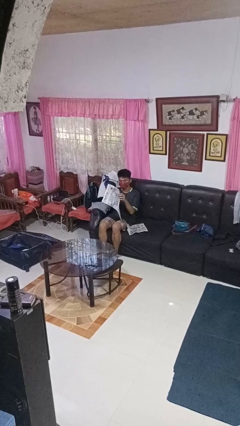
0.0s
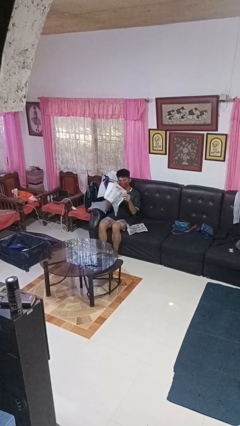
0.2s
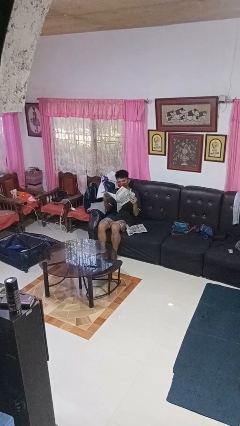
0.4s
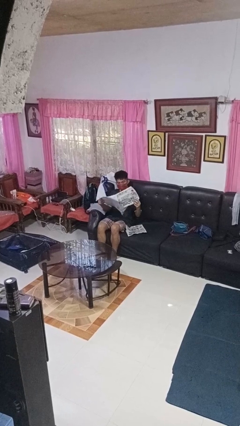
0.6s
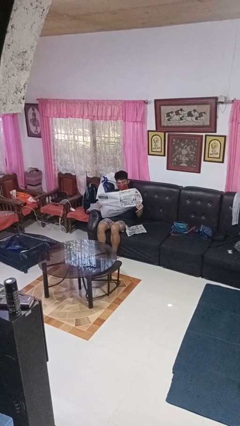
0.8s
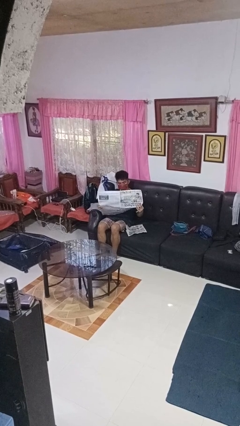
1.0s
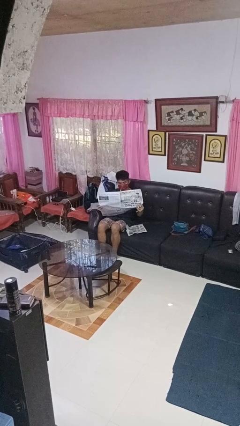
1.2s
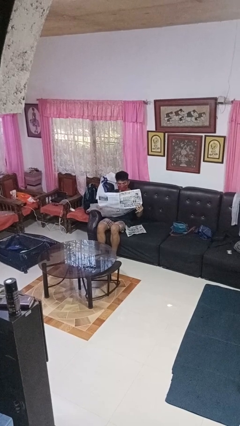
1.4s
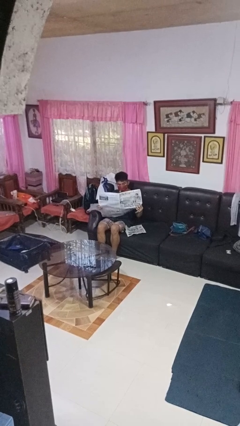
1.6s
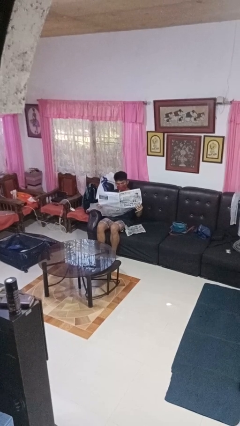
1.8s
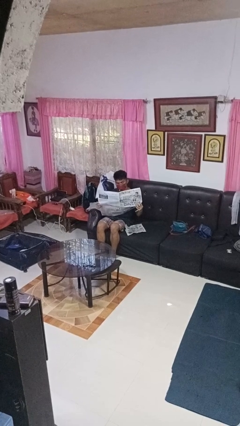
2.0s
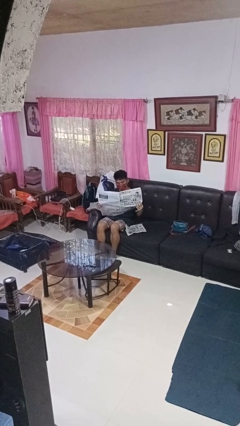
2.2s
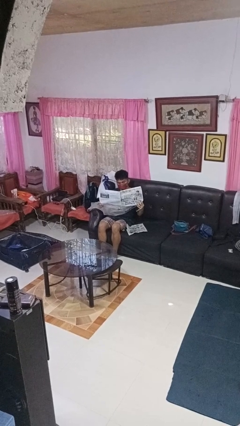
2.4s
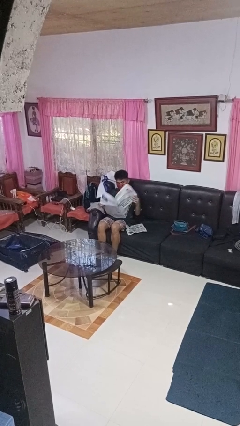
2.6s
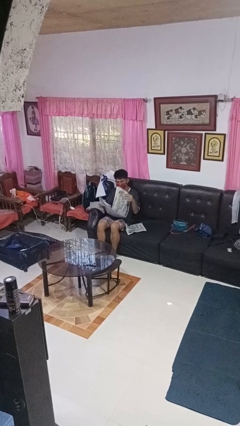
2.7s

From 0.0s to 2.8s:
person reads newspaper

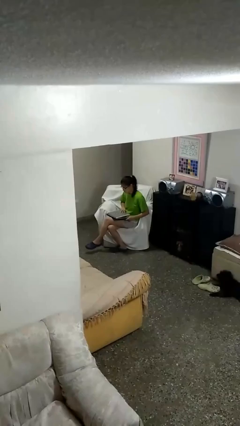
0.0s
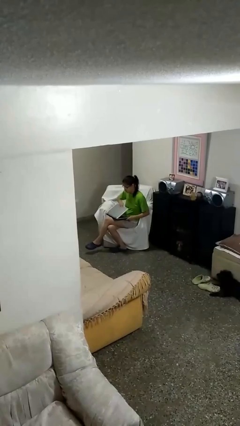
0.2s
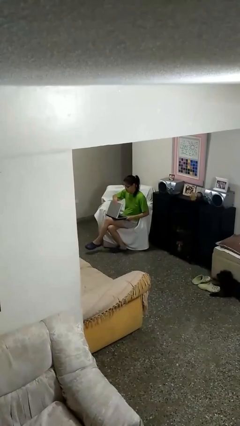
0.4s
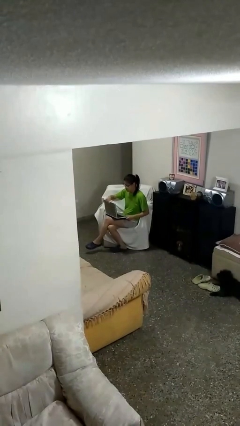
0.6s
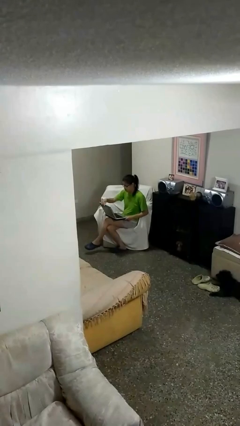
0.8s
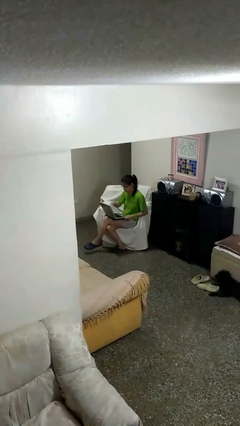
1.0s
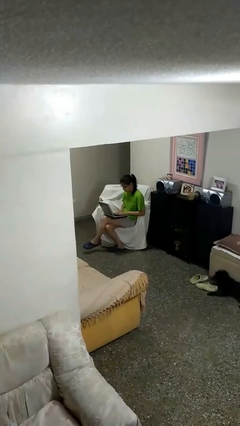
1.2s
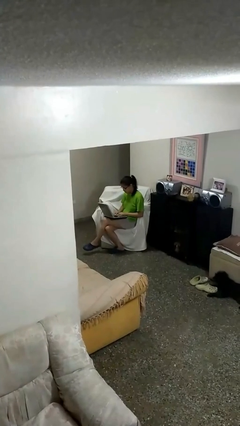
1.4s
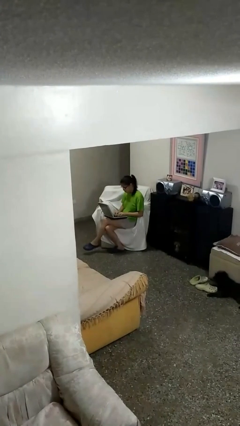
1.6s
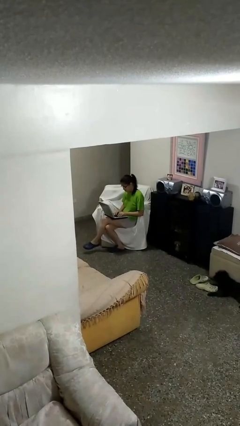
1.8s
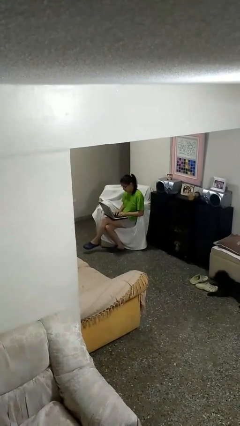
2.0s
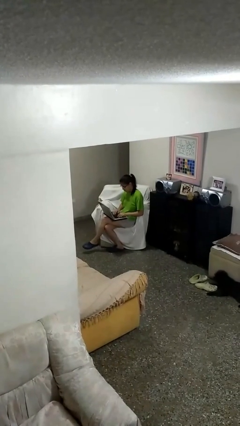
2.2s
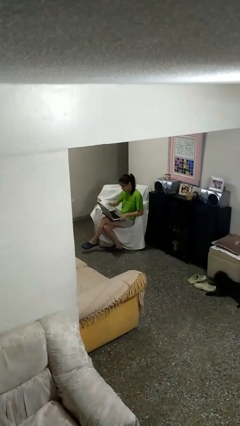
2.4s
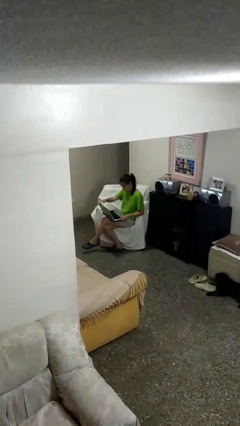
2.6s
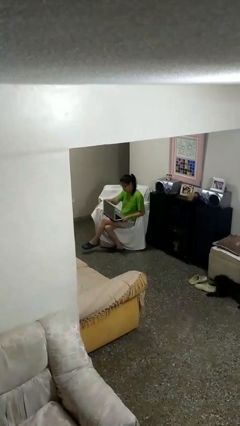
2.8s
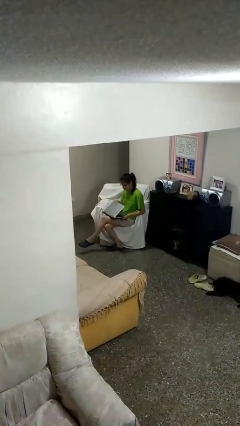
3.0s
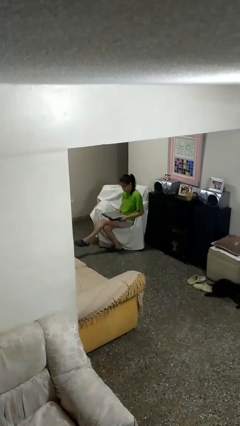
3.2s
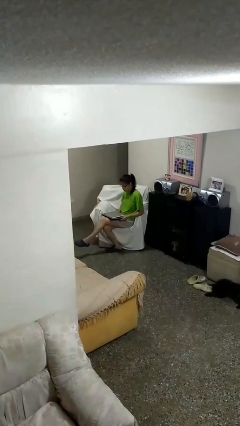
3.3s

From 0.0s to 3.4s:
person interacts with laptop

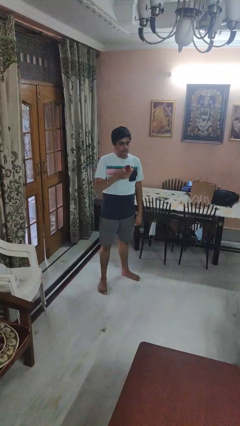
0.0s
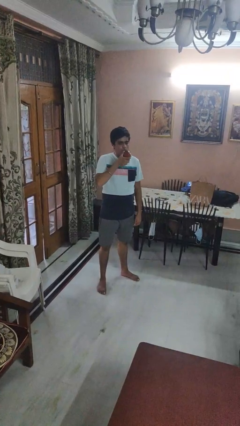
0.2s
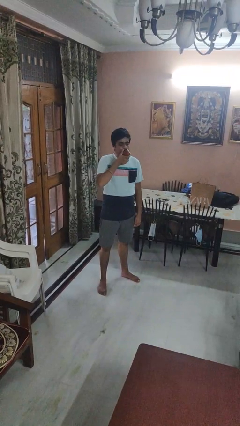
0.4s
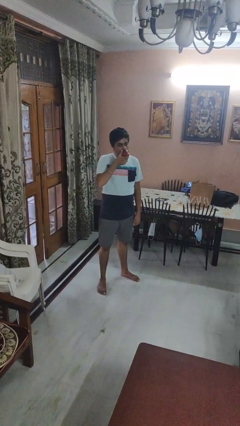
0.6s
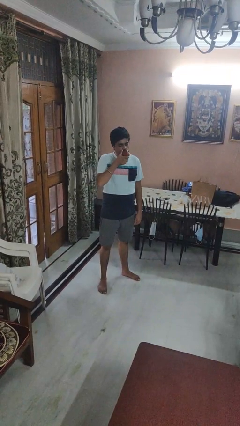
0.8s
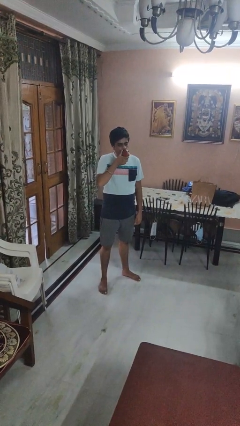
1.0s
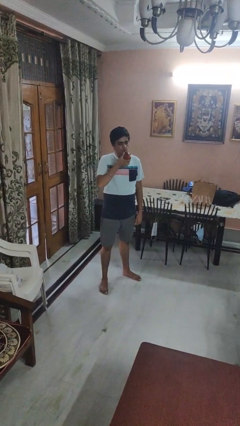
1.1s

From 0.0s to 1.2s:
person eats apple

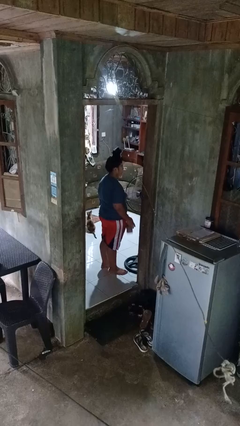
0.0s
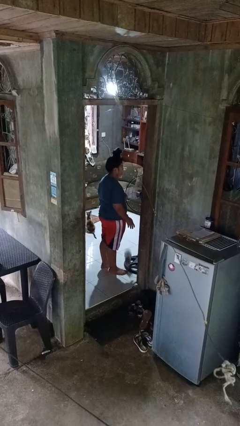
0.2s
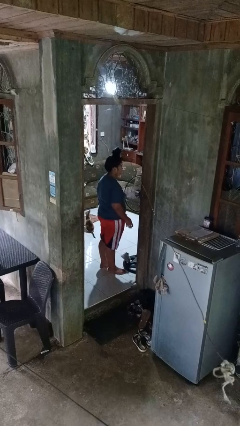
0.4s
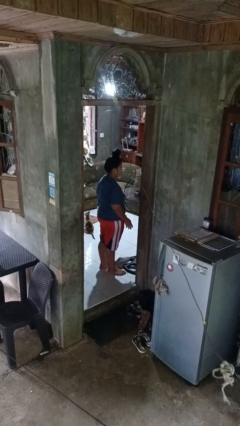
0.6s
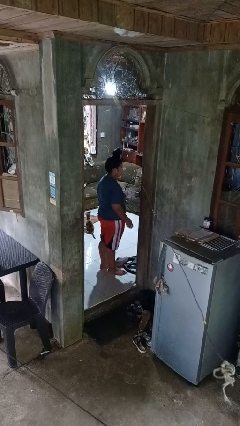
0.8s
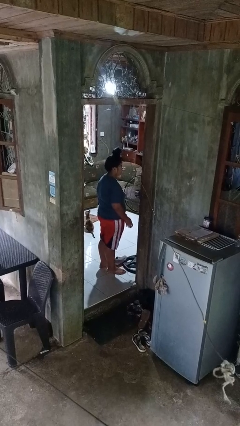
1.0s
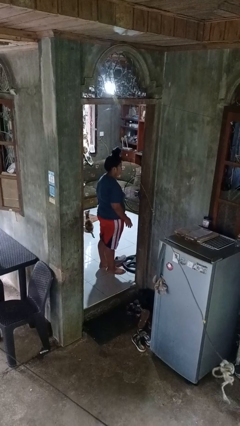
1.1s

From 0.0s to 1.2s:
person drops object

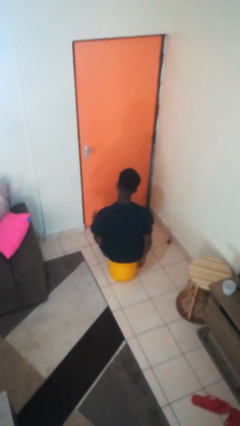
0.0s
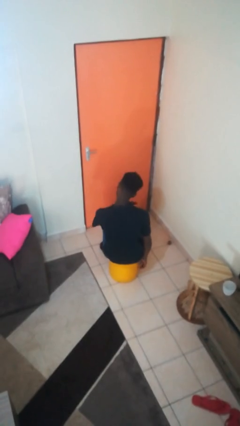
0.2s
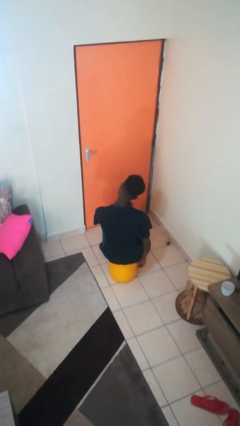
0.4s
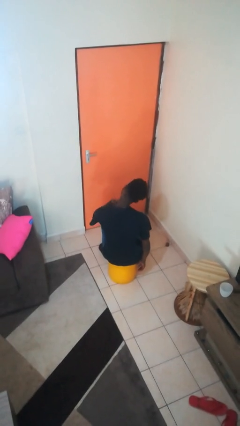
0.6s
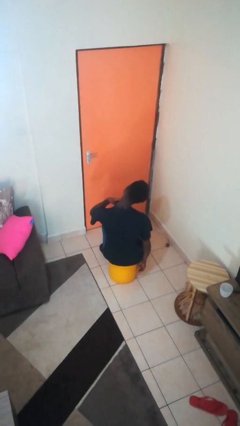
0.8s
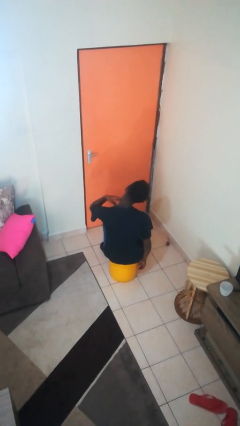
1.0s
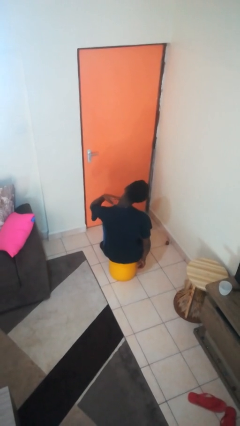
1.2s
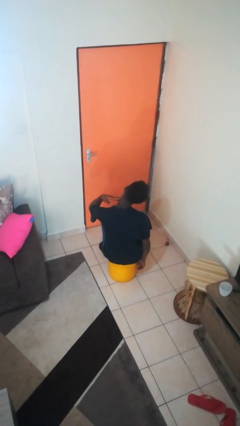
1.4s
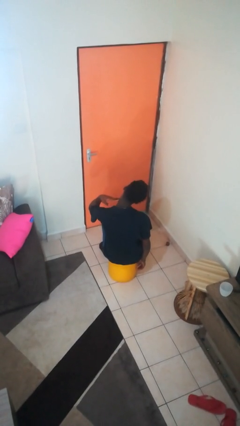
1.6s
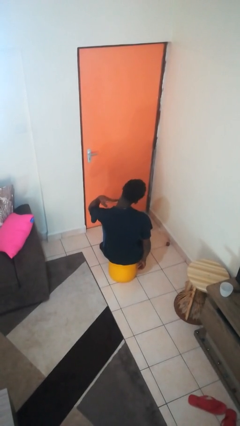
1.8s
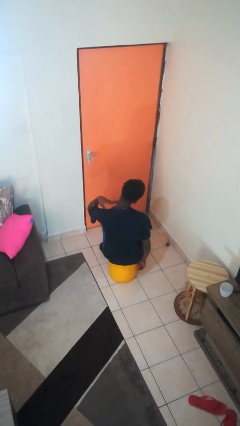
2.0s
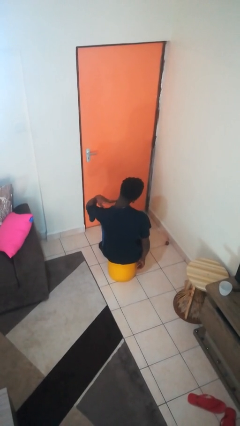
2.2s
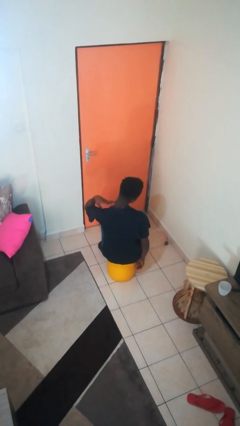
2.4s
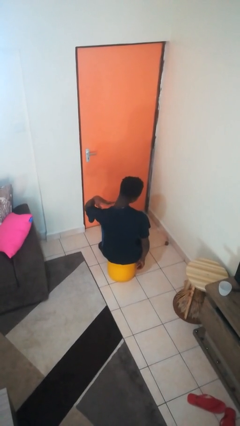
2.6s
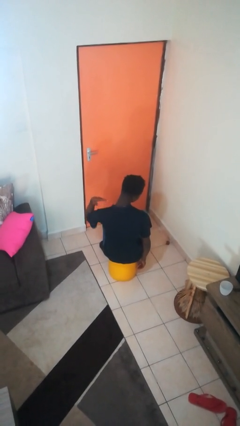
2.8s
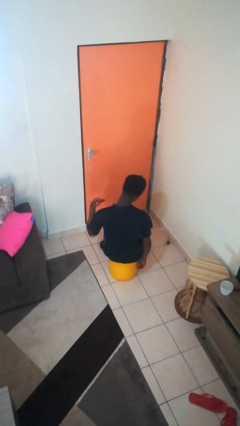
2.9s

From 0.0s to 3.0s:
person gestures cut

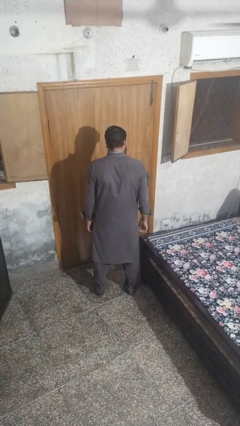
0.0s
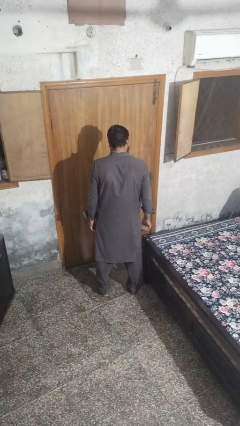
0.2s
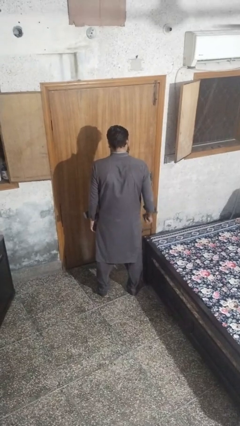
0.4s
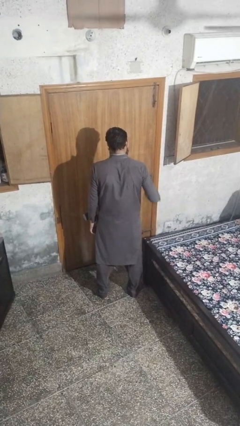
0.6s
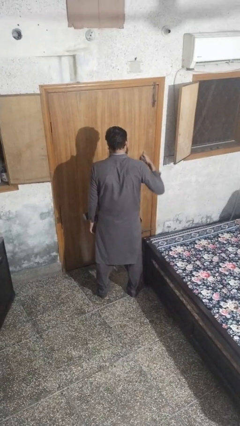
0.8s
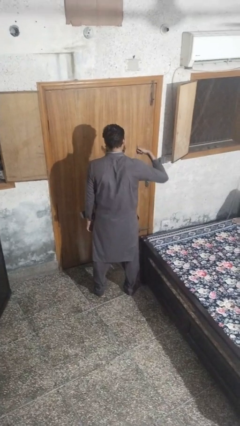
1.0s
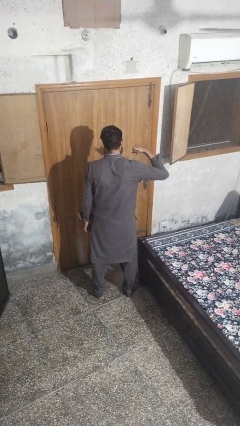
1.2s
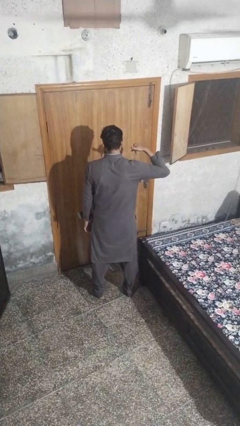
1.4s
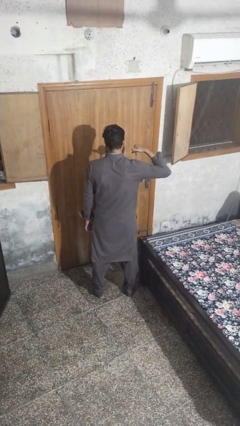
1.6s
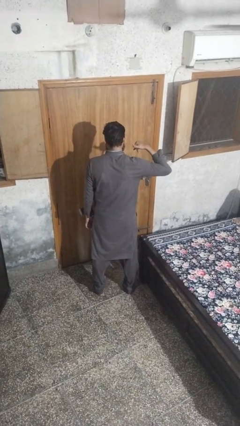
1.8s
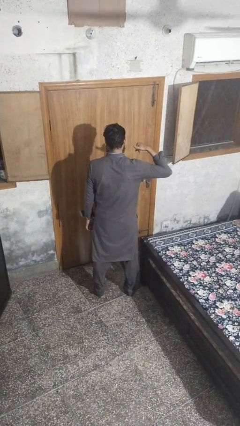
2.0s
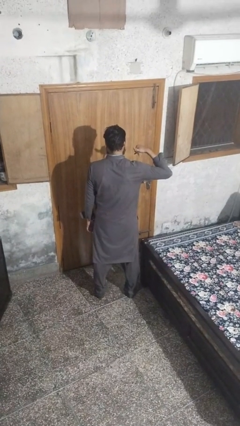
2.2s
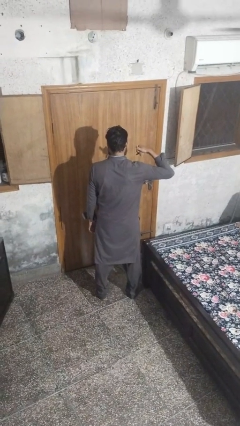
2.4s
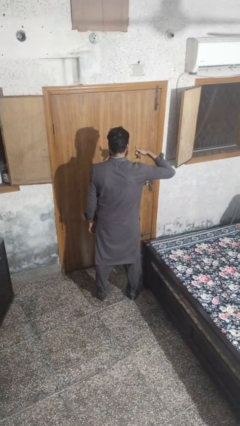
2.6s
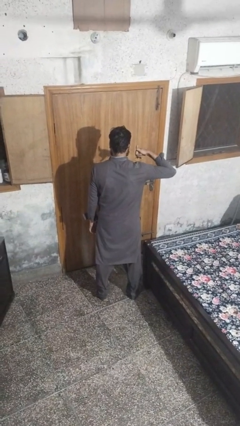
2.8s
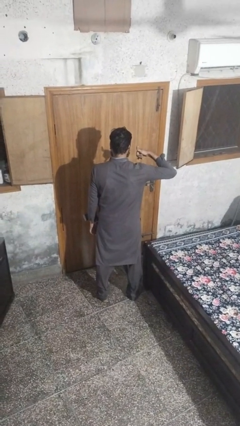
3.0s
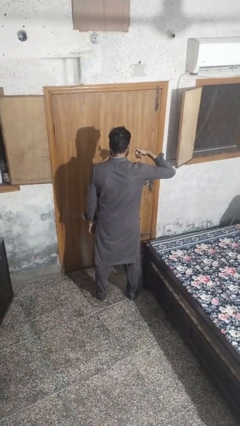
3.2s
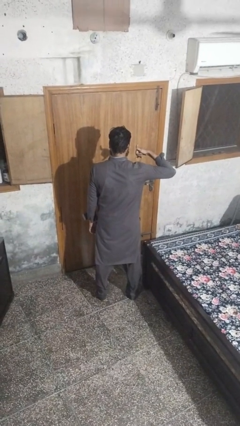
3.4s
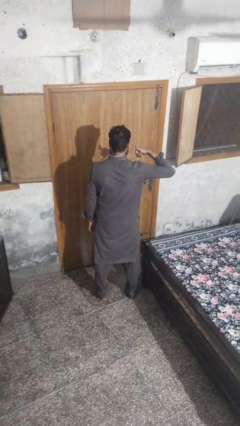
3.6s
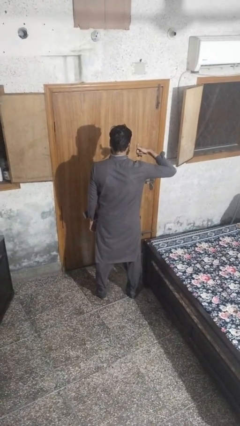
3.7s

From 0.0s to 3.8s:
person gestures call me

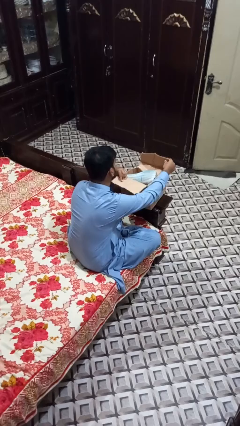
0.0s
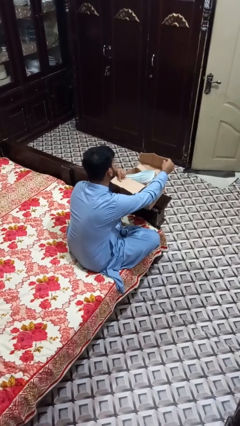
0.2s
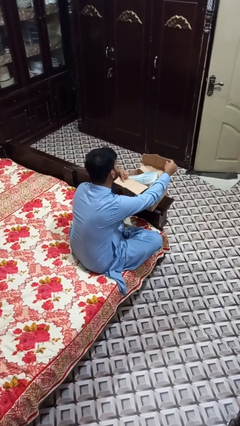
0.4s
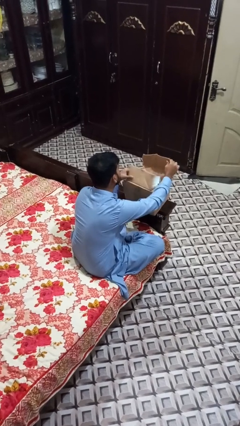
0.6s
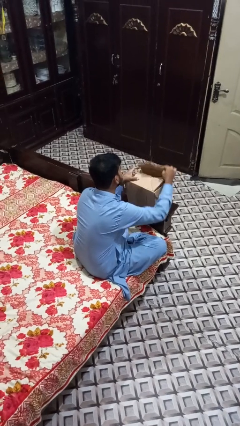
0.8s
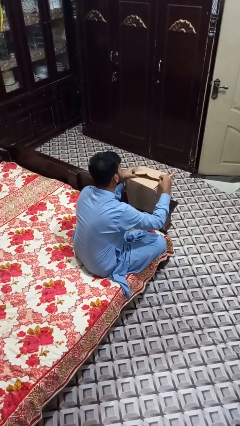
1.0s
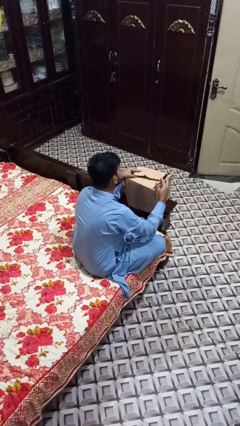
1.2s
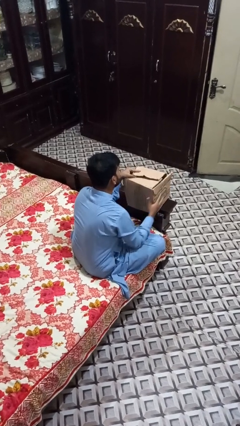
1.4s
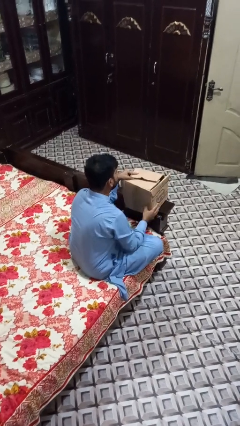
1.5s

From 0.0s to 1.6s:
person closes box

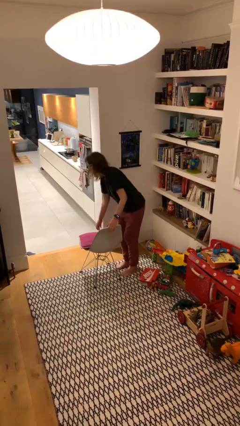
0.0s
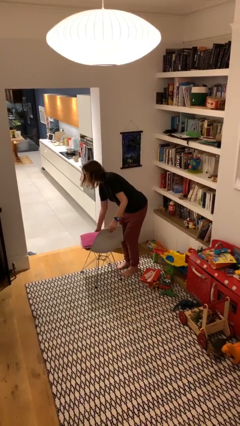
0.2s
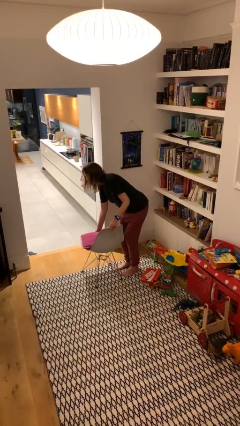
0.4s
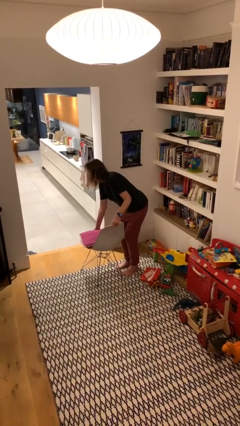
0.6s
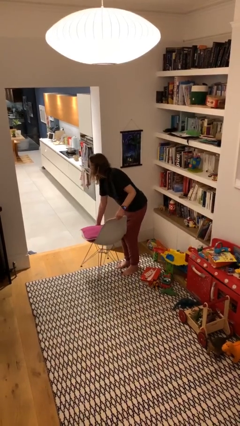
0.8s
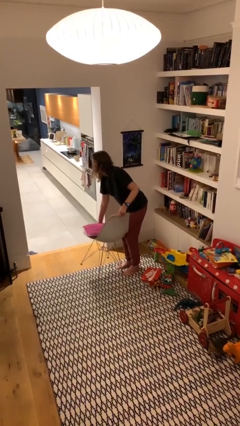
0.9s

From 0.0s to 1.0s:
person picks up object from floor
